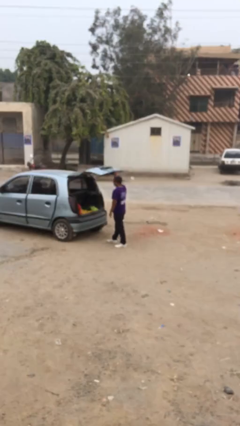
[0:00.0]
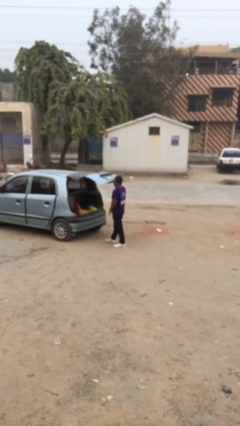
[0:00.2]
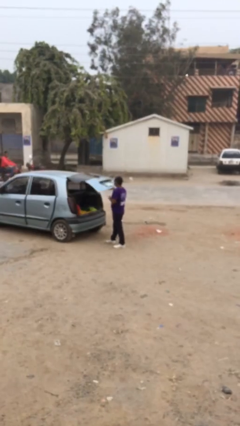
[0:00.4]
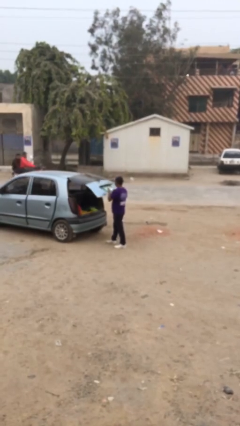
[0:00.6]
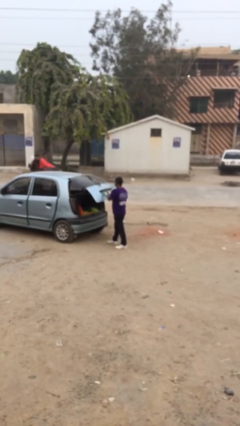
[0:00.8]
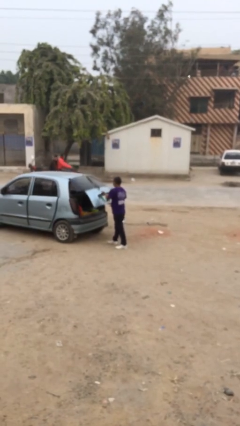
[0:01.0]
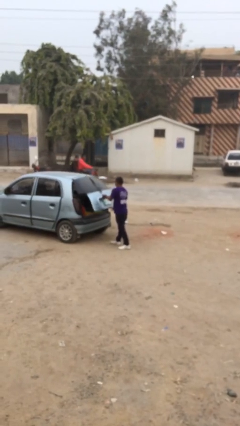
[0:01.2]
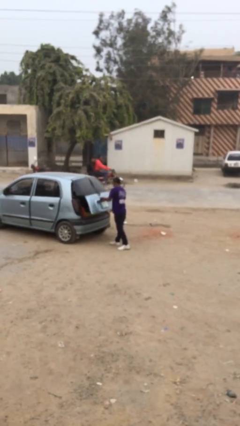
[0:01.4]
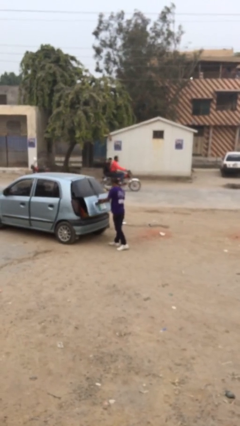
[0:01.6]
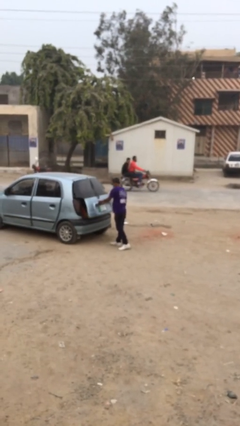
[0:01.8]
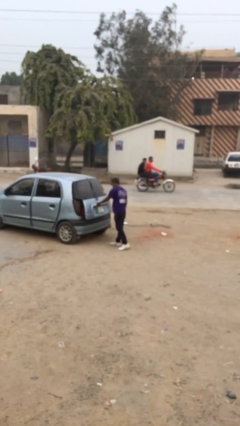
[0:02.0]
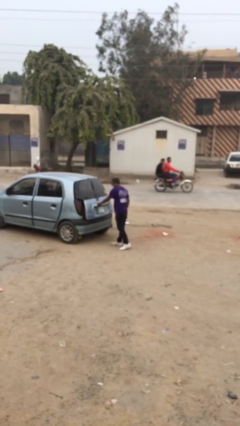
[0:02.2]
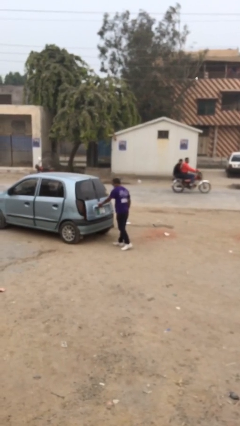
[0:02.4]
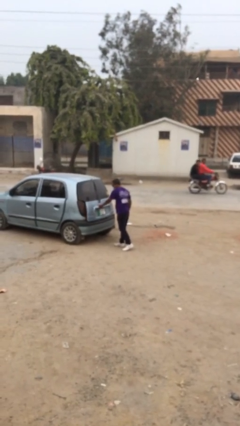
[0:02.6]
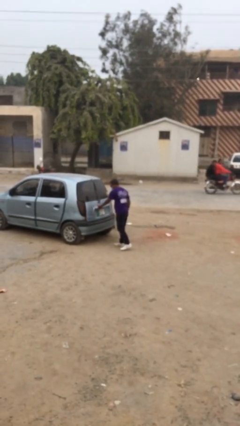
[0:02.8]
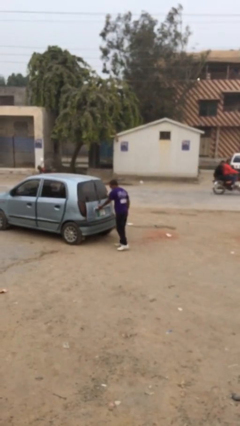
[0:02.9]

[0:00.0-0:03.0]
person closes car trunk

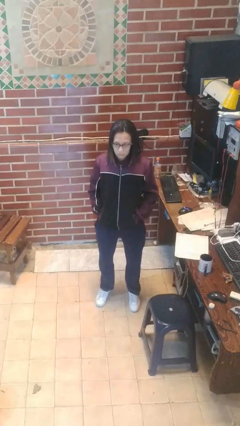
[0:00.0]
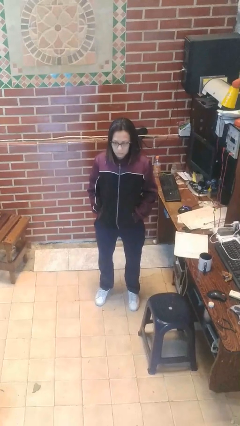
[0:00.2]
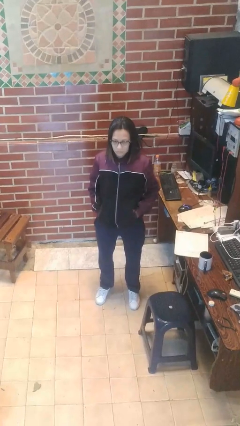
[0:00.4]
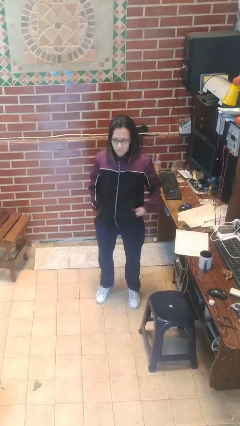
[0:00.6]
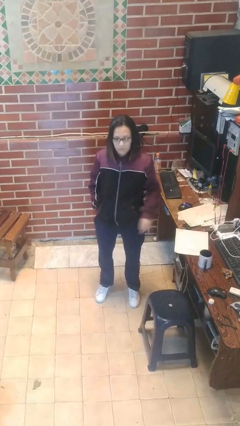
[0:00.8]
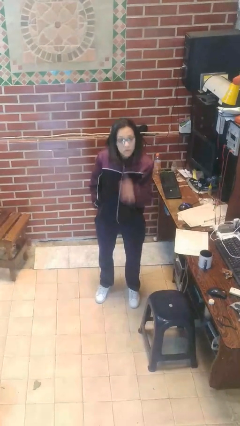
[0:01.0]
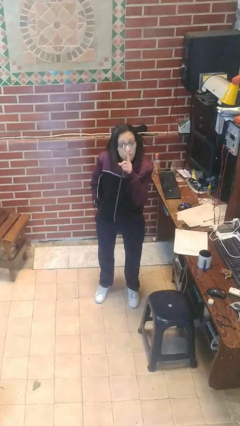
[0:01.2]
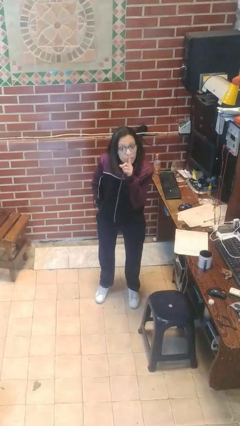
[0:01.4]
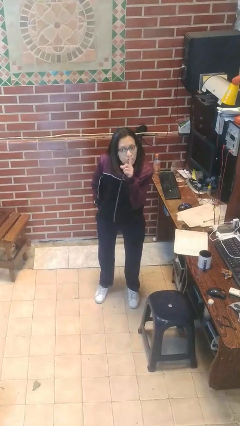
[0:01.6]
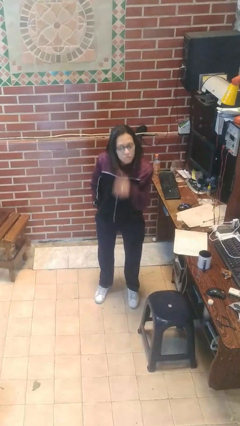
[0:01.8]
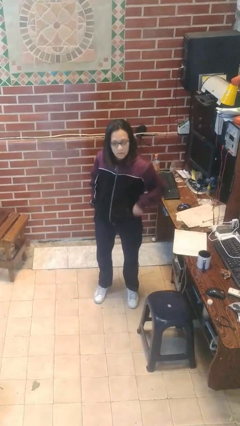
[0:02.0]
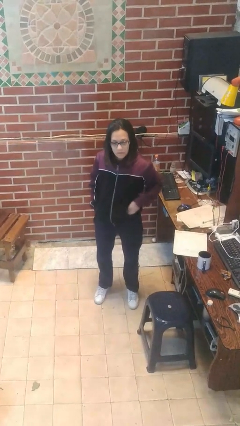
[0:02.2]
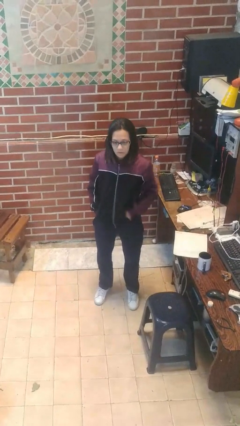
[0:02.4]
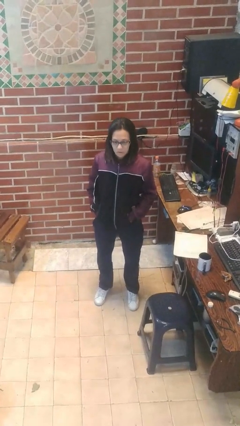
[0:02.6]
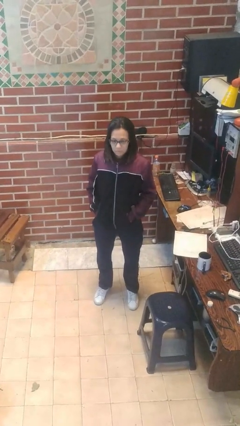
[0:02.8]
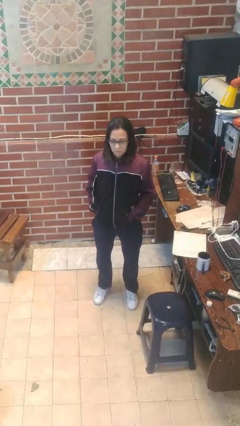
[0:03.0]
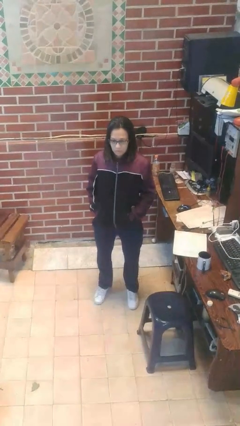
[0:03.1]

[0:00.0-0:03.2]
person gestures be quiet

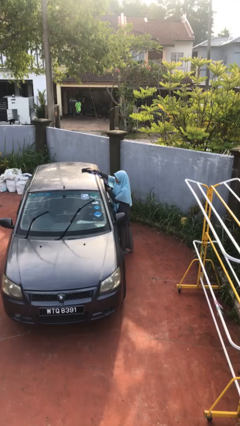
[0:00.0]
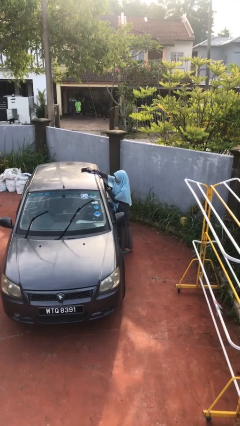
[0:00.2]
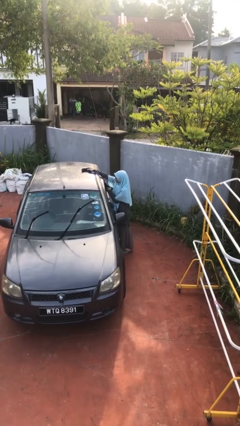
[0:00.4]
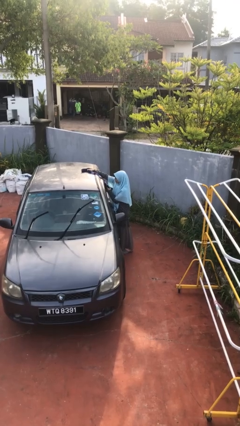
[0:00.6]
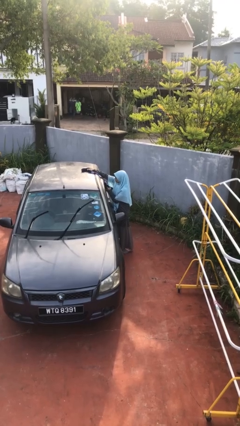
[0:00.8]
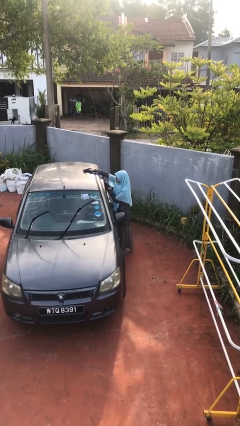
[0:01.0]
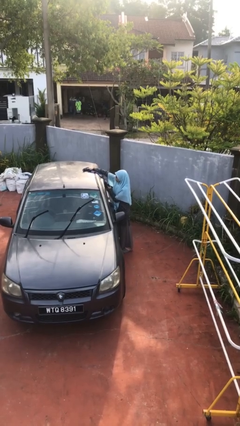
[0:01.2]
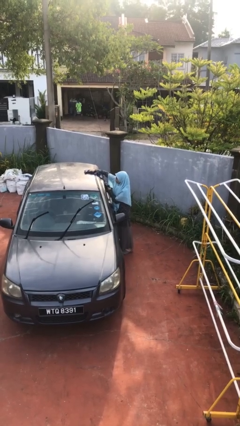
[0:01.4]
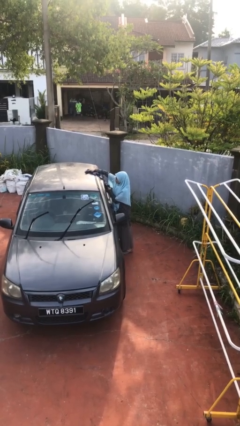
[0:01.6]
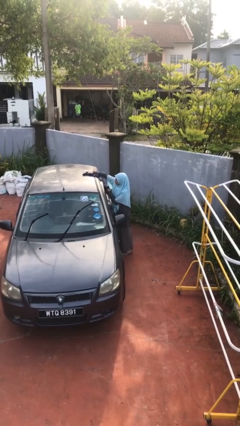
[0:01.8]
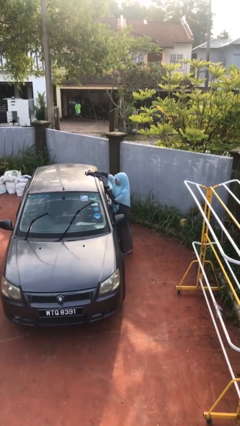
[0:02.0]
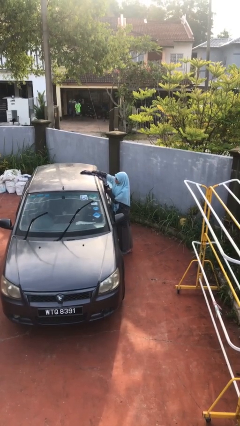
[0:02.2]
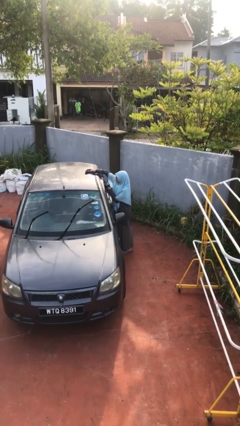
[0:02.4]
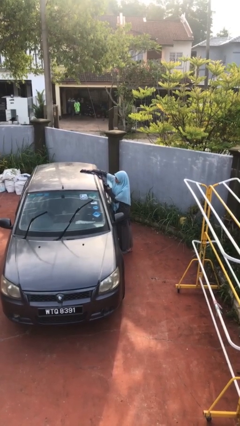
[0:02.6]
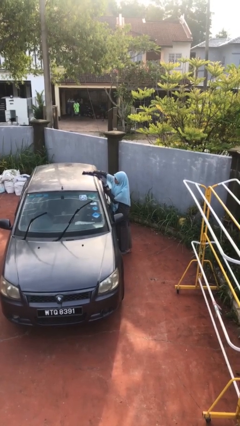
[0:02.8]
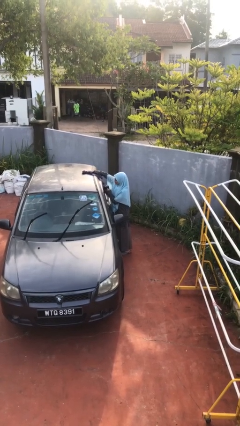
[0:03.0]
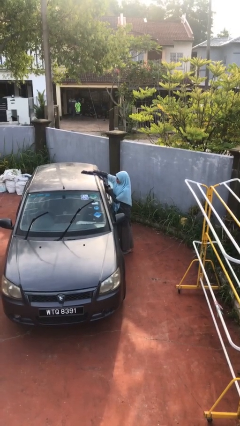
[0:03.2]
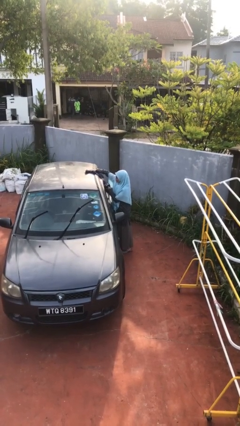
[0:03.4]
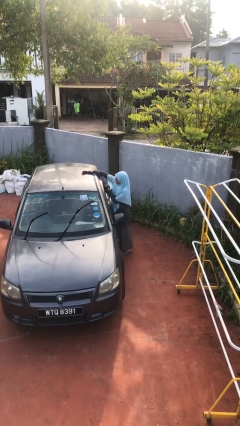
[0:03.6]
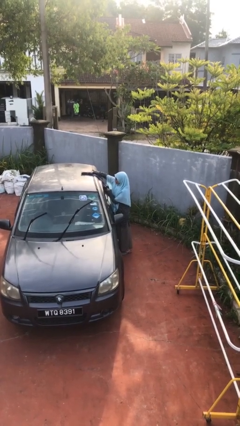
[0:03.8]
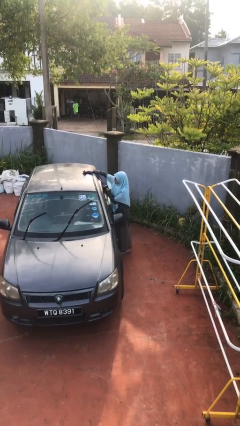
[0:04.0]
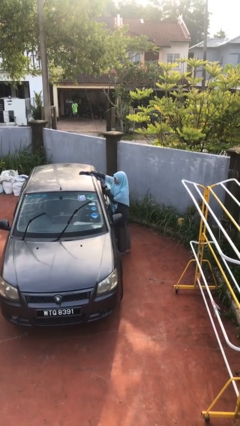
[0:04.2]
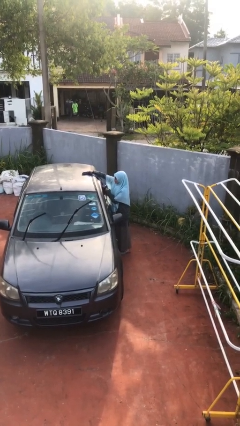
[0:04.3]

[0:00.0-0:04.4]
person polishes car with rag

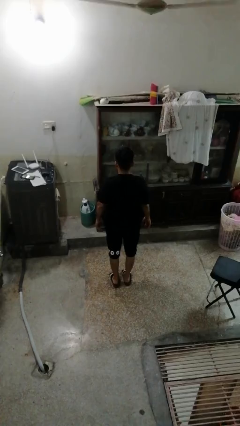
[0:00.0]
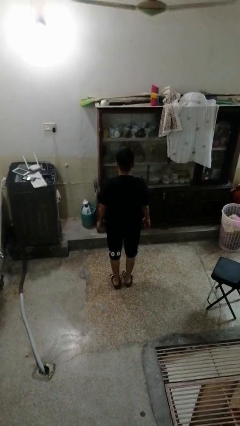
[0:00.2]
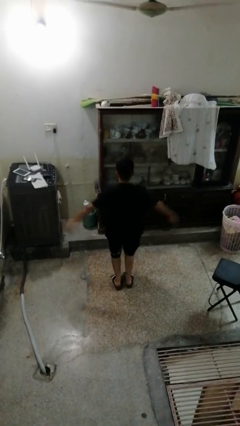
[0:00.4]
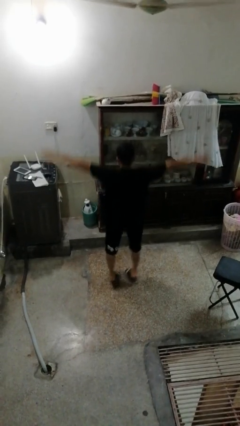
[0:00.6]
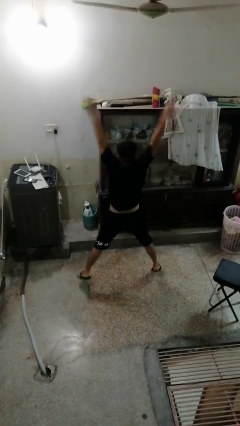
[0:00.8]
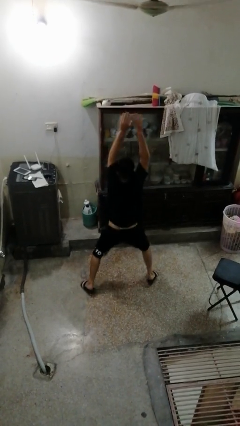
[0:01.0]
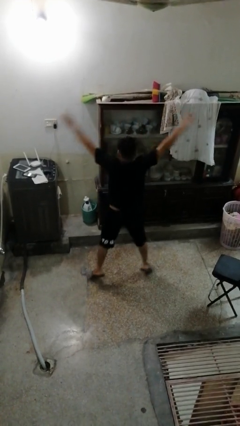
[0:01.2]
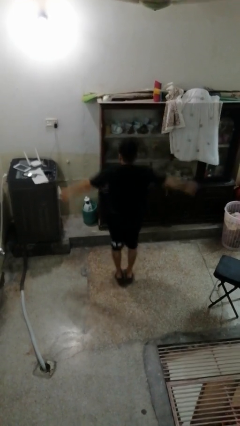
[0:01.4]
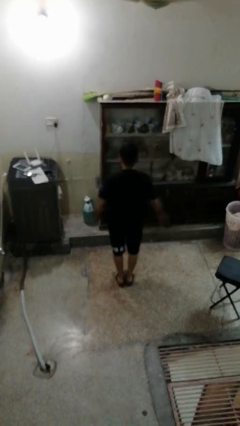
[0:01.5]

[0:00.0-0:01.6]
person exercises with jumping jacks

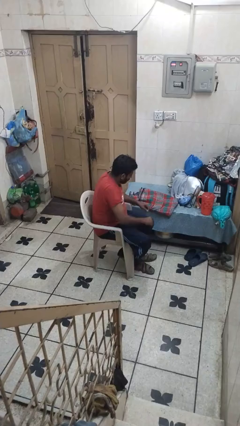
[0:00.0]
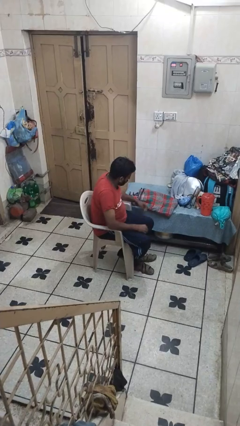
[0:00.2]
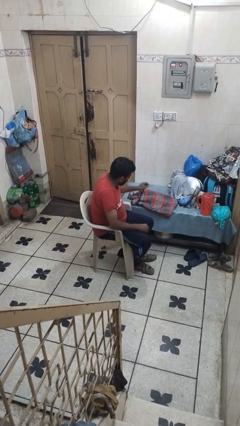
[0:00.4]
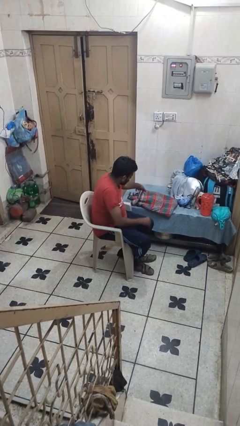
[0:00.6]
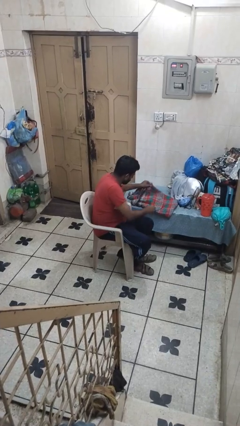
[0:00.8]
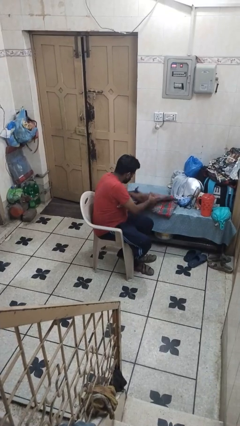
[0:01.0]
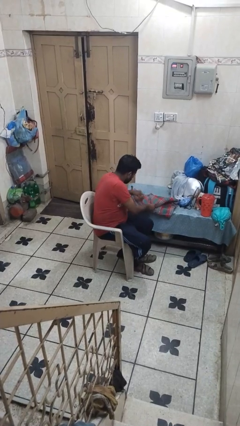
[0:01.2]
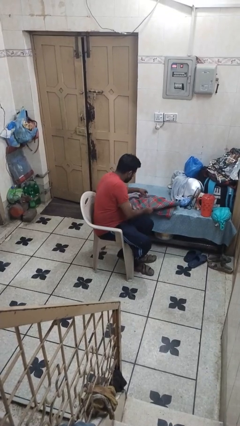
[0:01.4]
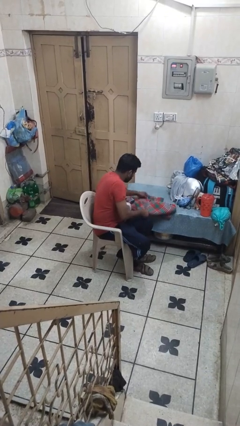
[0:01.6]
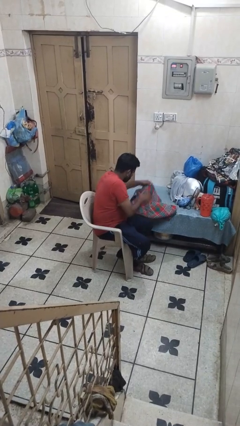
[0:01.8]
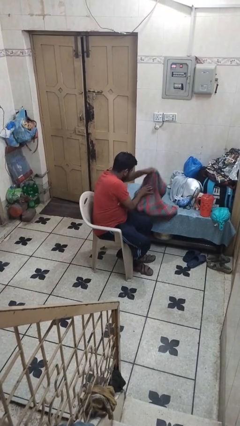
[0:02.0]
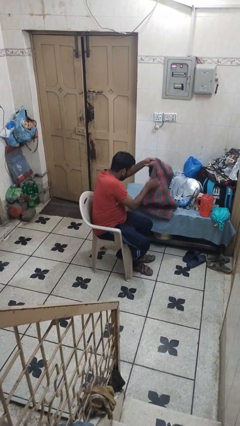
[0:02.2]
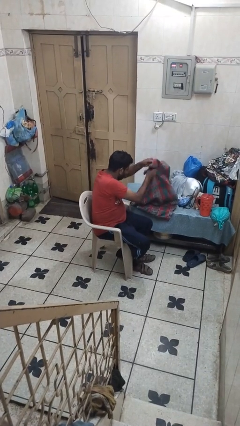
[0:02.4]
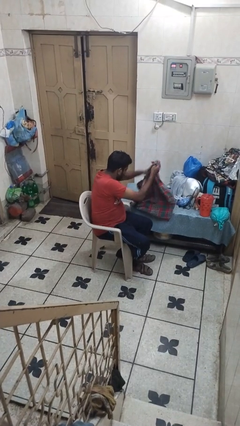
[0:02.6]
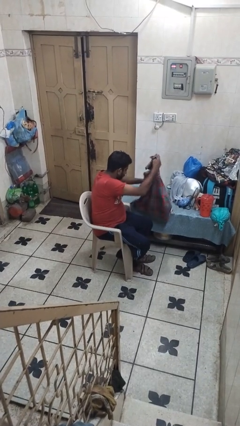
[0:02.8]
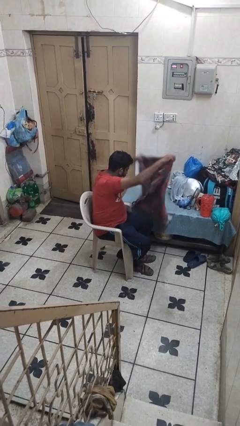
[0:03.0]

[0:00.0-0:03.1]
person unfolds blanket

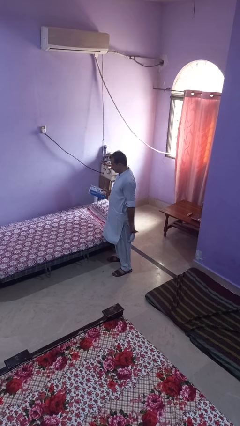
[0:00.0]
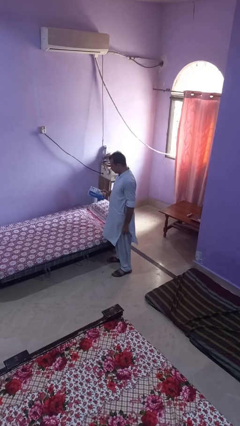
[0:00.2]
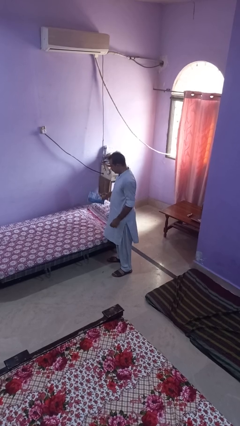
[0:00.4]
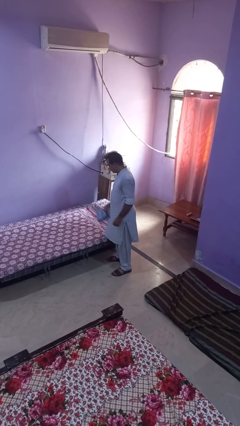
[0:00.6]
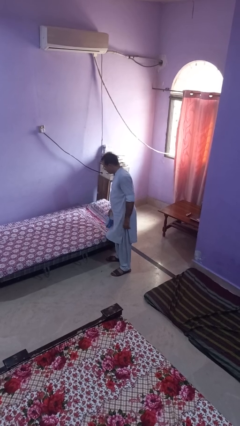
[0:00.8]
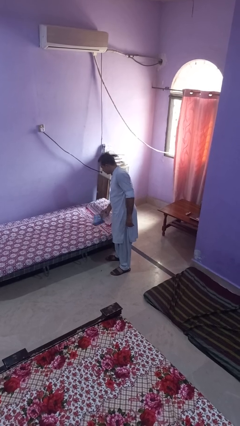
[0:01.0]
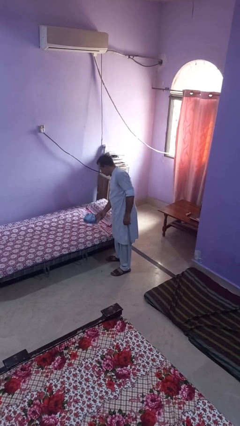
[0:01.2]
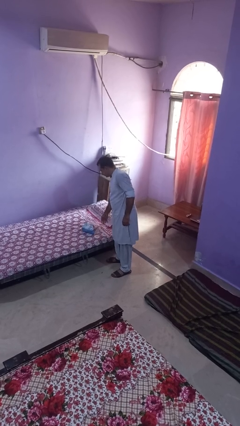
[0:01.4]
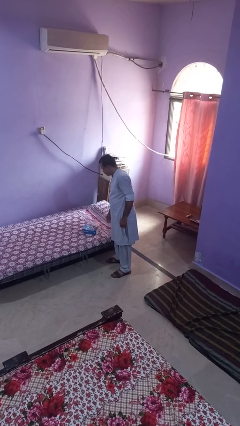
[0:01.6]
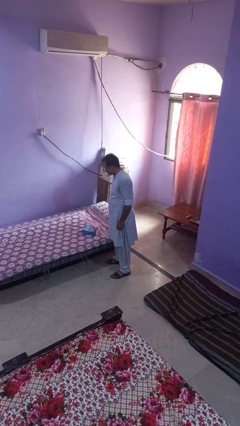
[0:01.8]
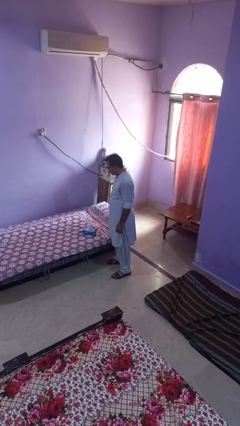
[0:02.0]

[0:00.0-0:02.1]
person puts down object on bed

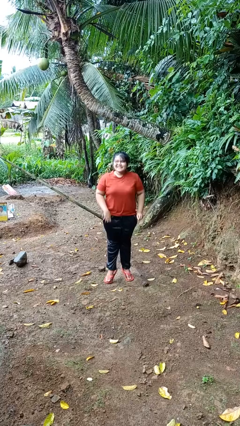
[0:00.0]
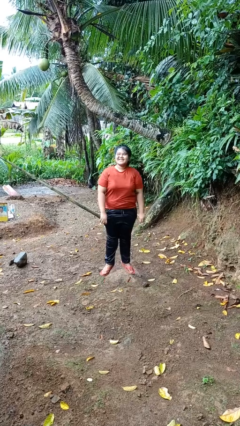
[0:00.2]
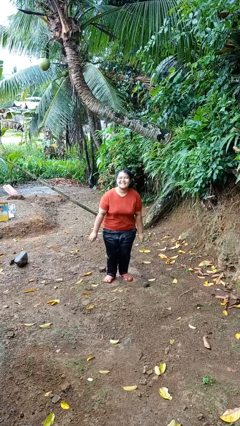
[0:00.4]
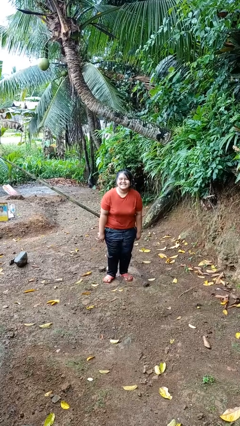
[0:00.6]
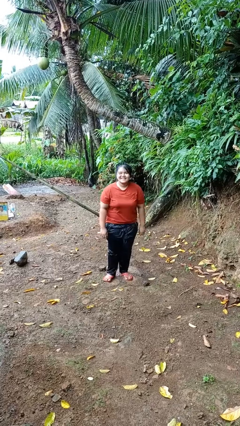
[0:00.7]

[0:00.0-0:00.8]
person jumps
